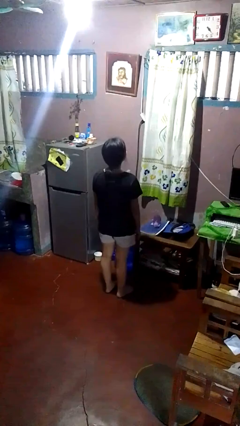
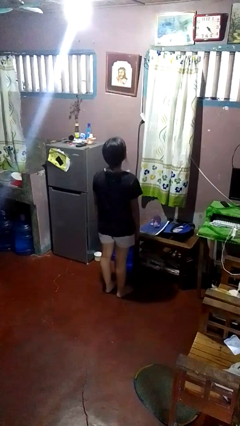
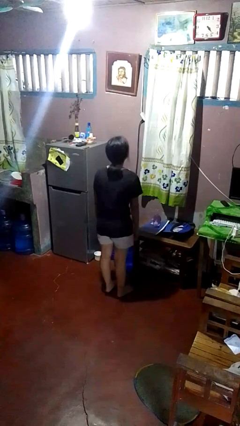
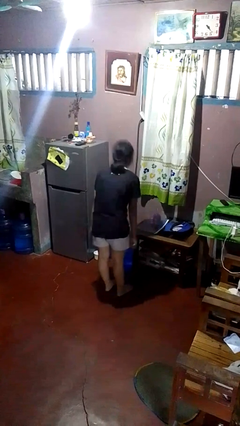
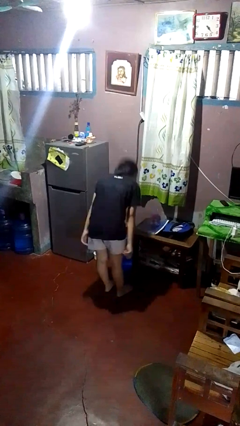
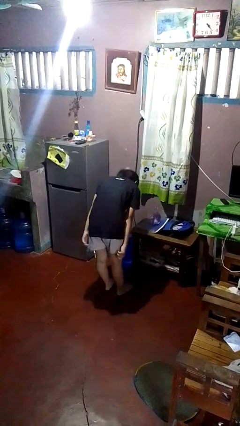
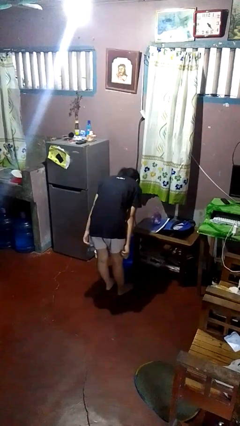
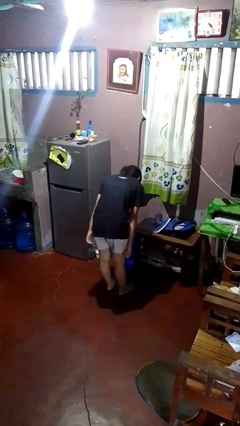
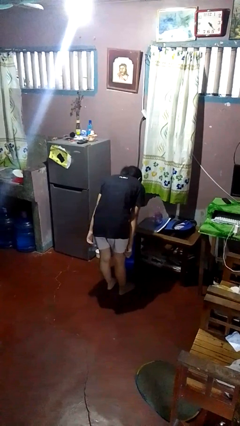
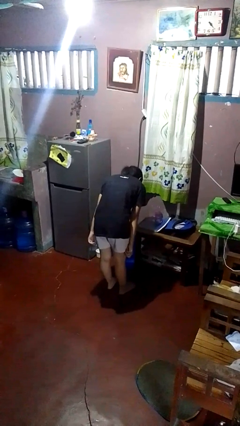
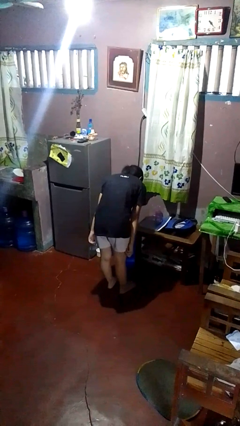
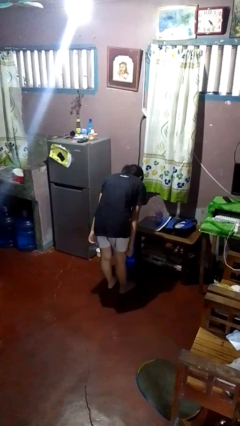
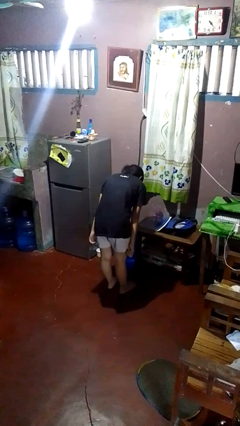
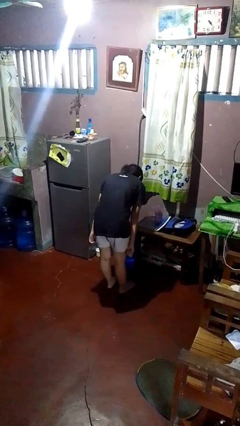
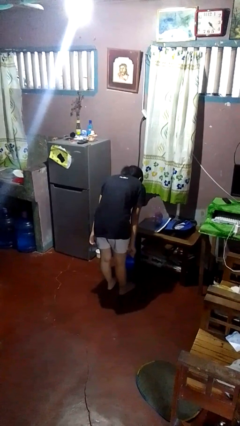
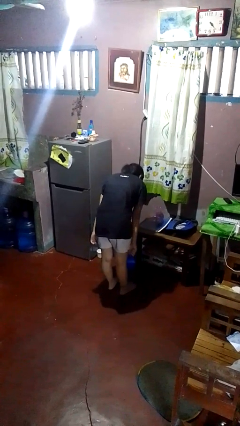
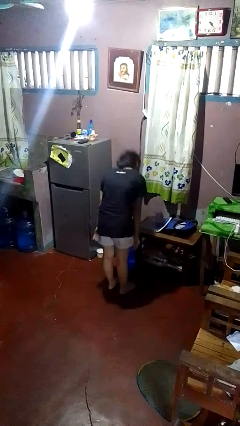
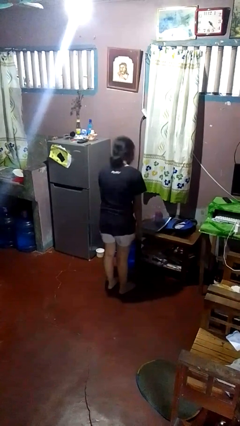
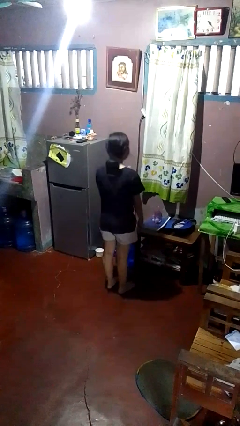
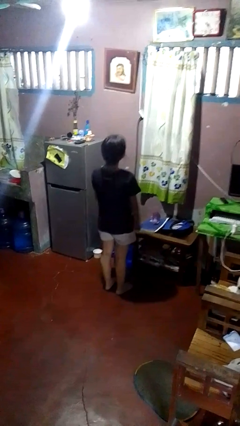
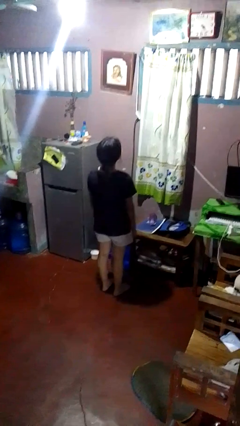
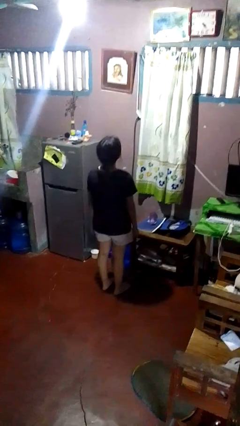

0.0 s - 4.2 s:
person bows

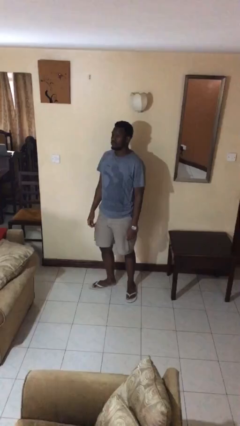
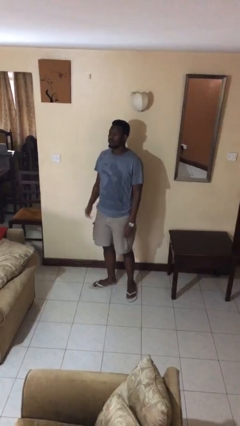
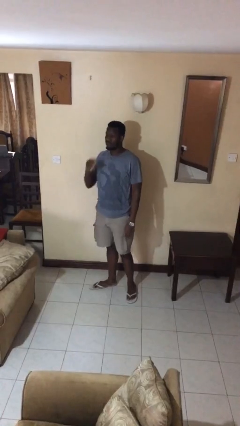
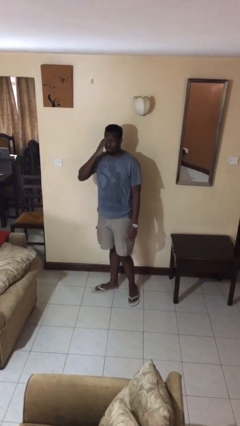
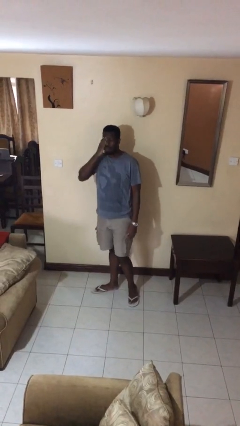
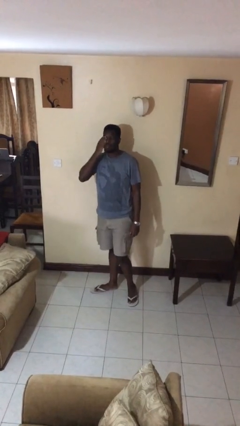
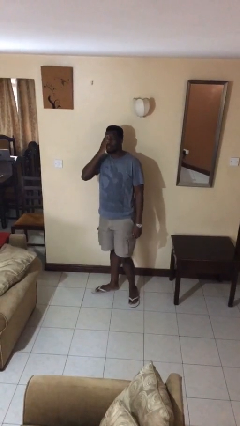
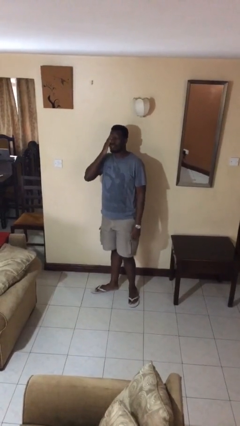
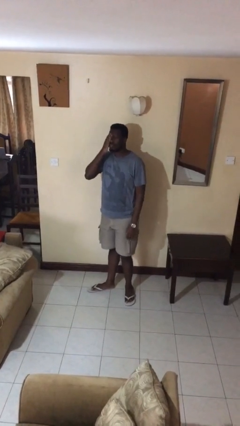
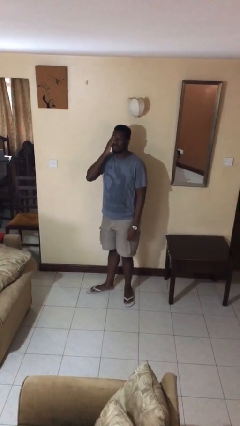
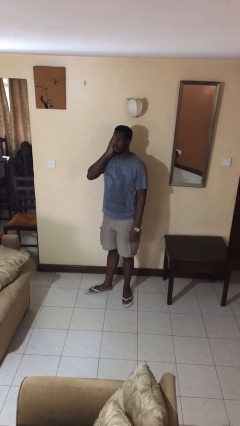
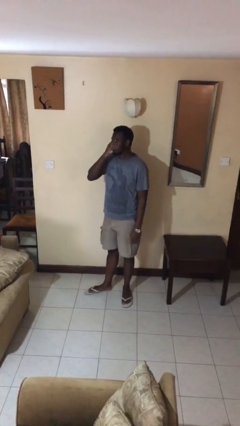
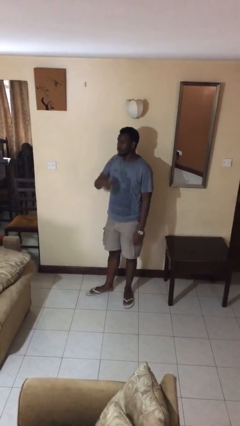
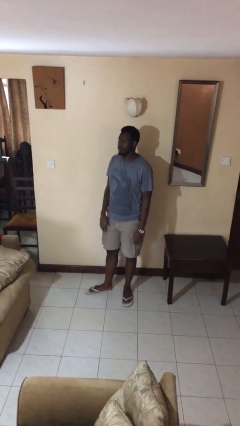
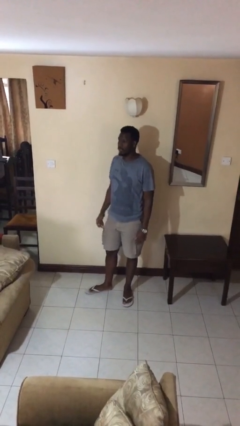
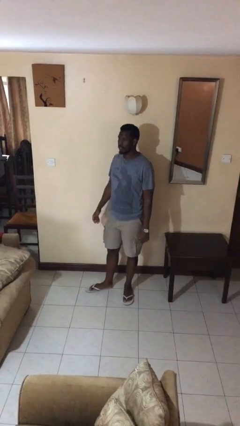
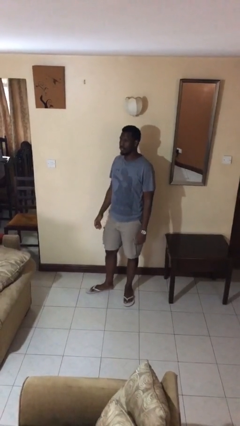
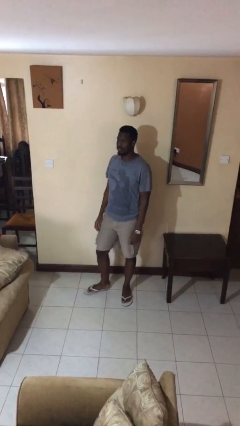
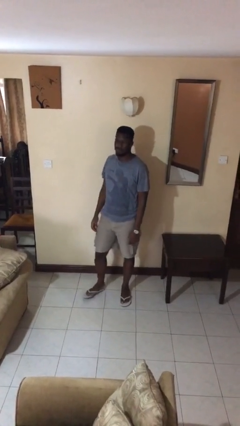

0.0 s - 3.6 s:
person rubs eyes

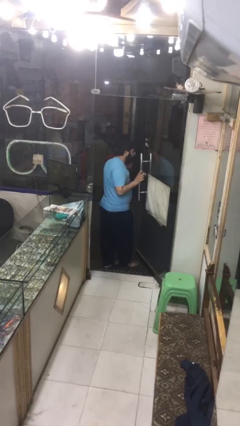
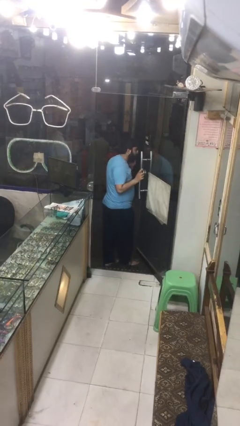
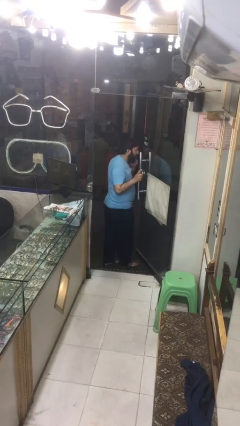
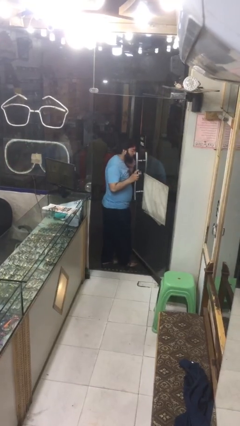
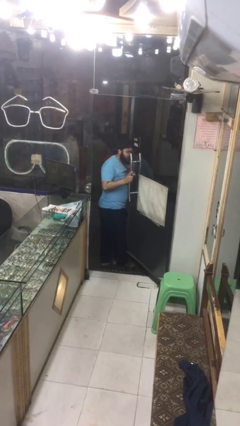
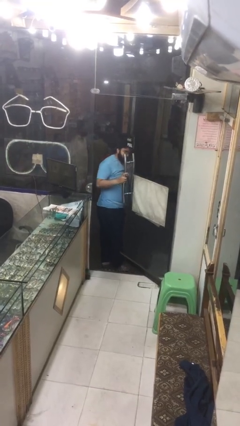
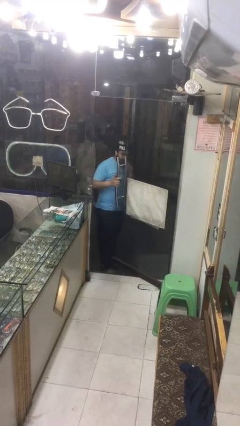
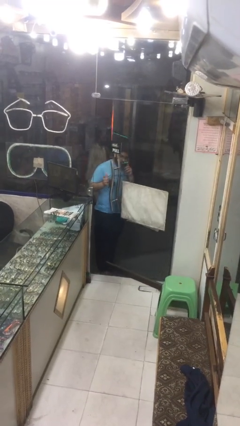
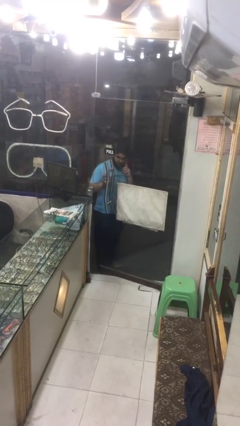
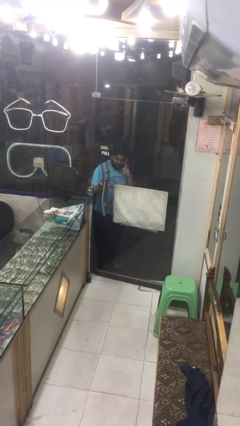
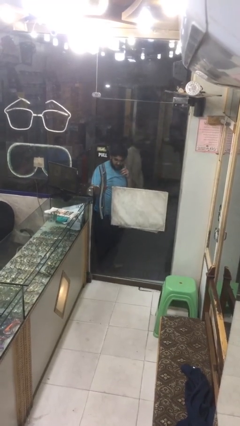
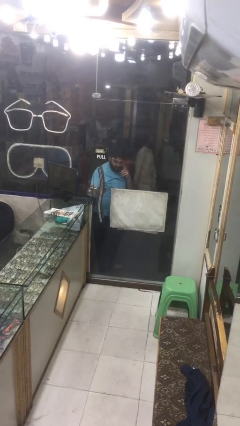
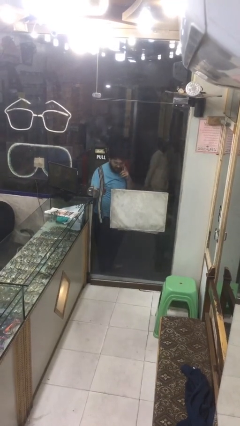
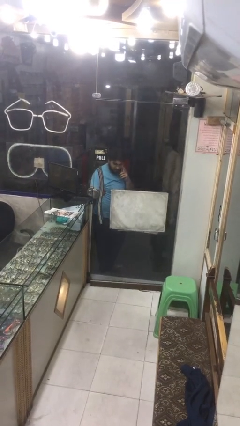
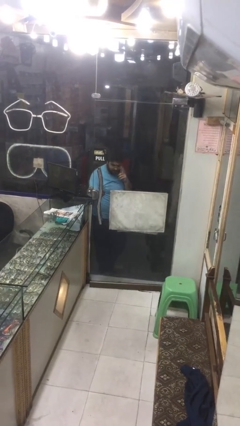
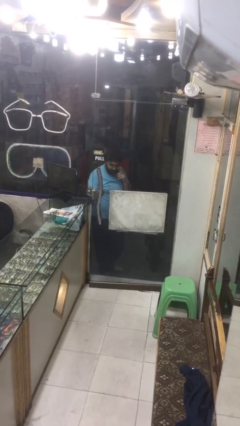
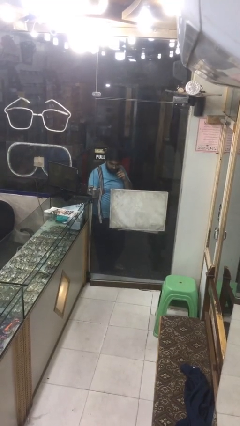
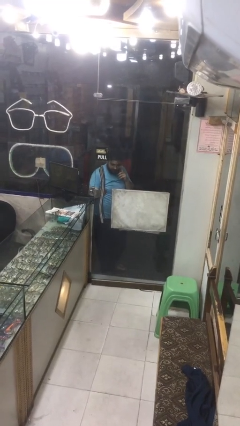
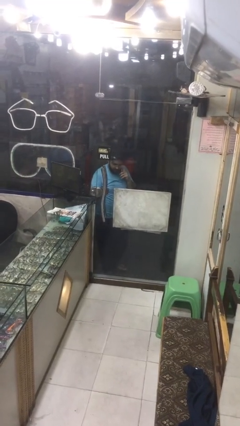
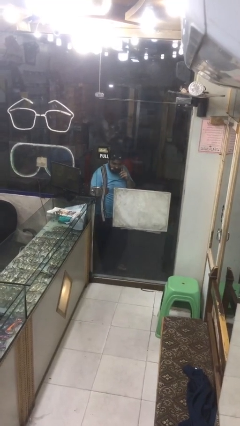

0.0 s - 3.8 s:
person closes facility door

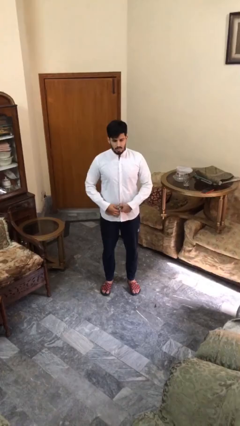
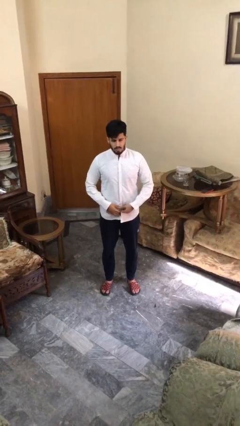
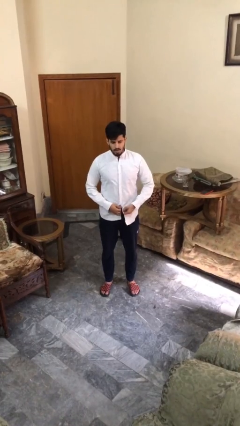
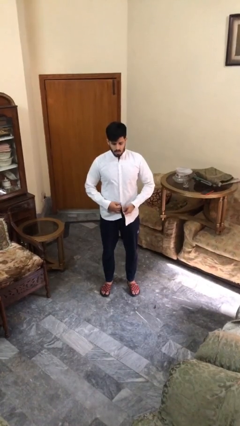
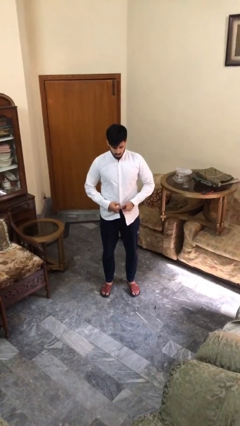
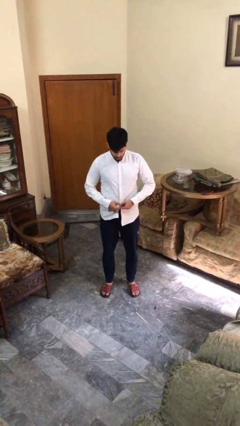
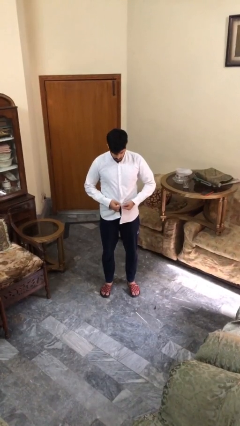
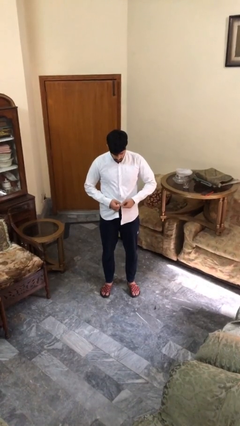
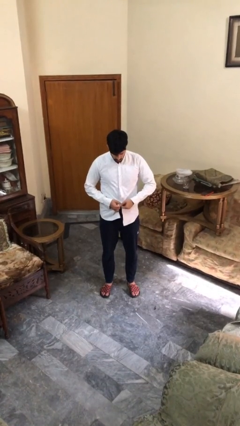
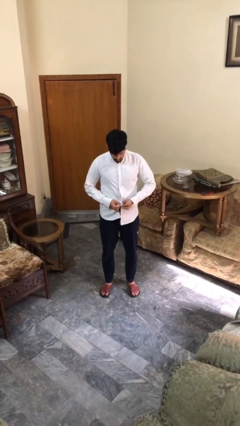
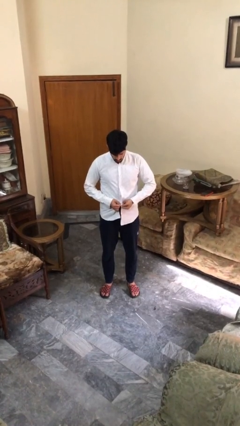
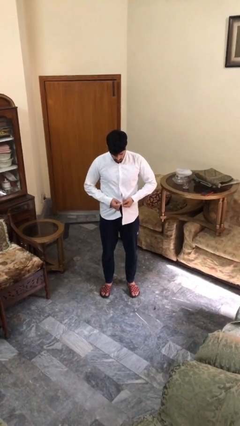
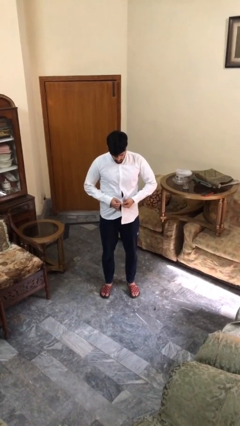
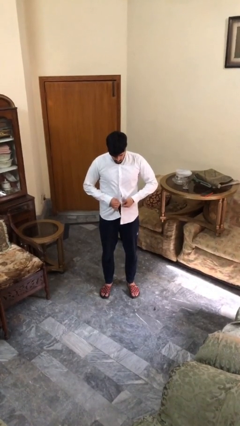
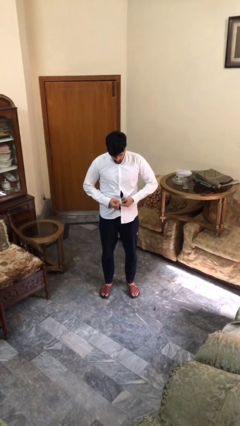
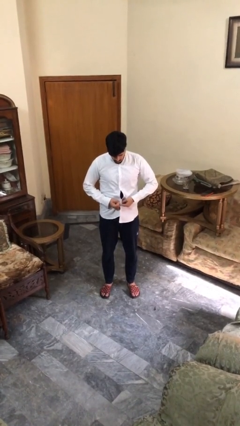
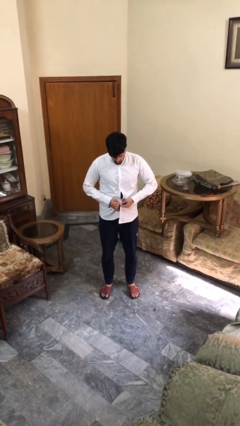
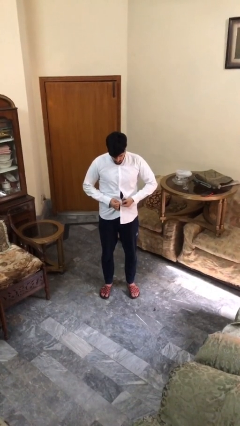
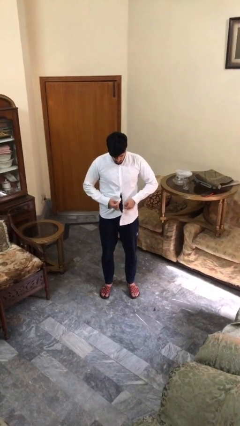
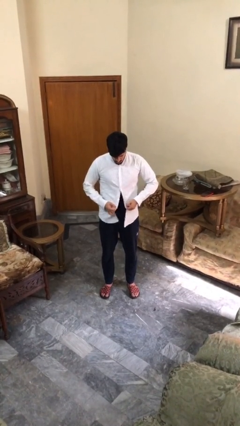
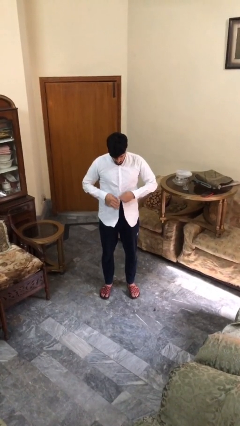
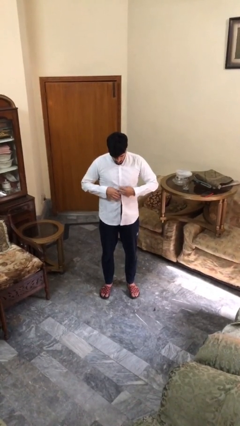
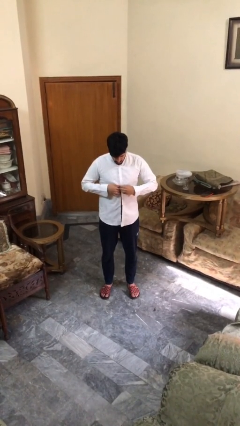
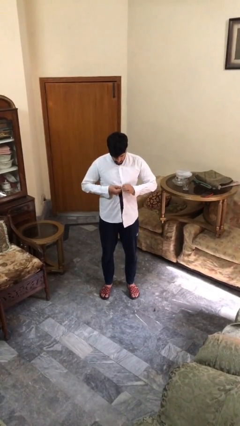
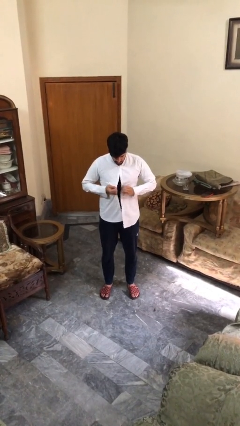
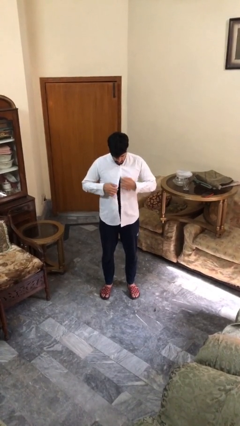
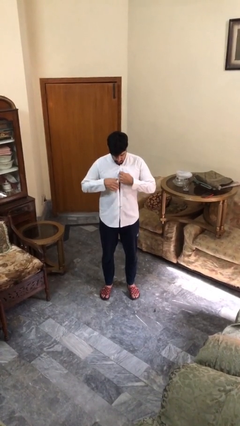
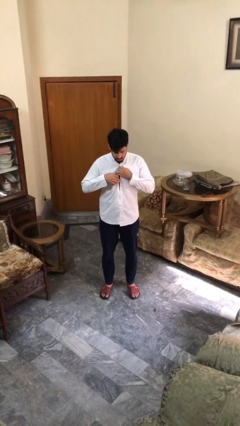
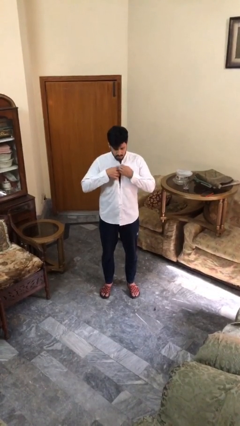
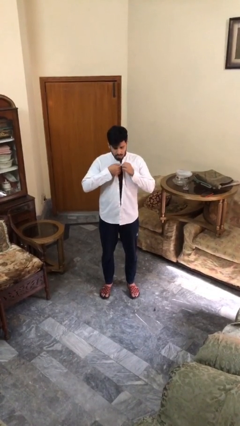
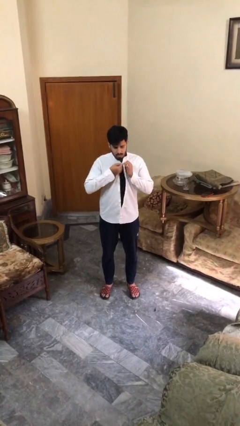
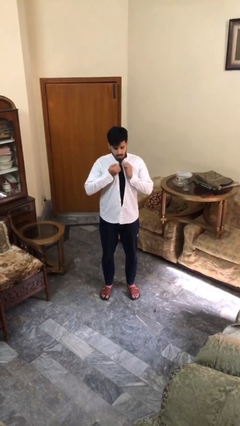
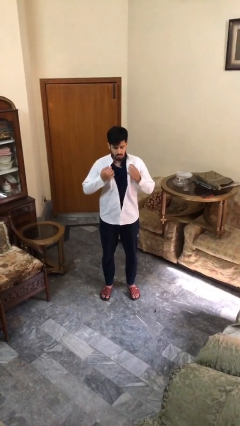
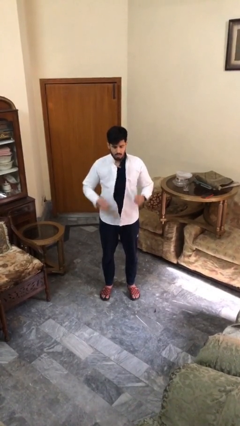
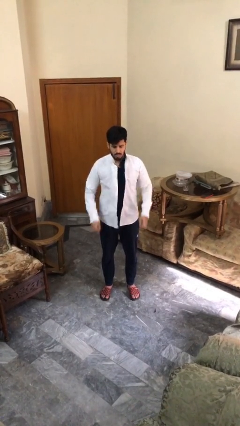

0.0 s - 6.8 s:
person unbuttons shirt
